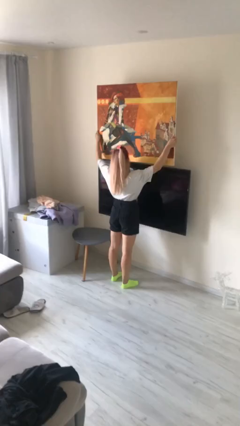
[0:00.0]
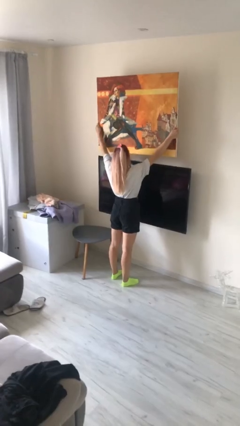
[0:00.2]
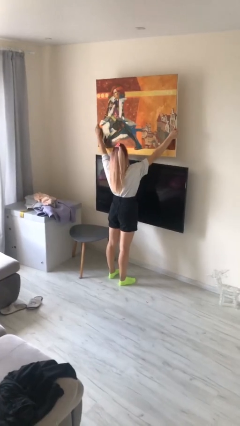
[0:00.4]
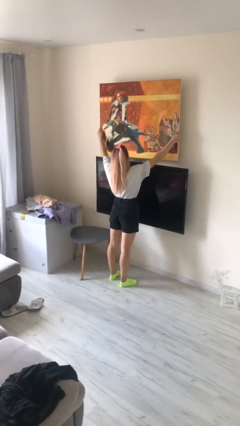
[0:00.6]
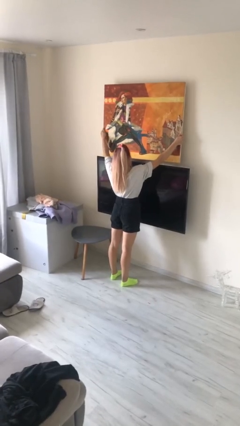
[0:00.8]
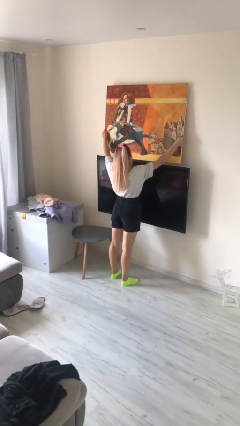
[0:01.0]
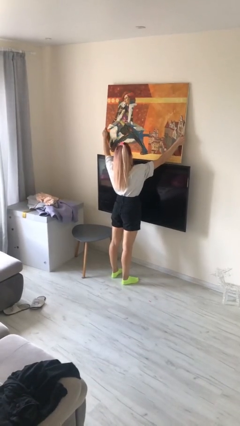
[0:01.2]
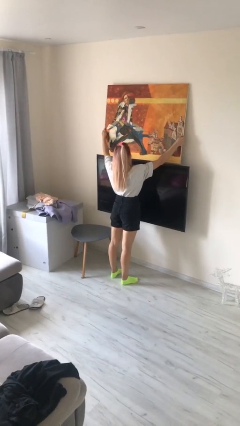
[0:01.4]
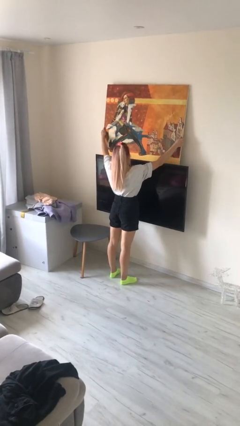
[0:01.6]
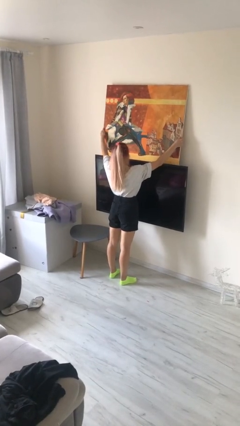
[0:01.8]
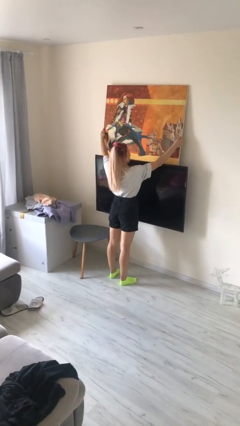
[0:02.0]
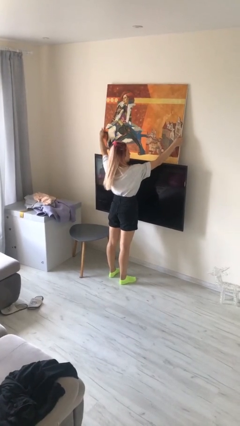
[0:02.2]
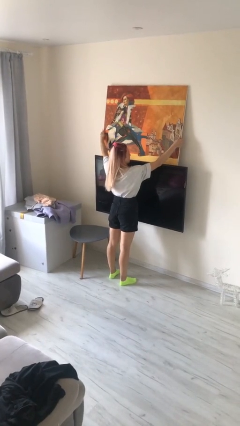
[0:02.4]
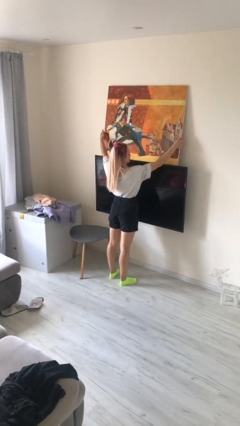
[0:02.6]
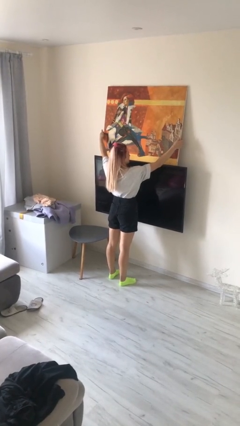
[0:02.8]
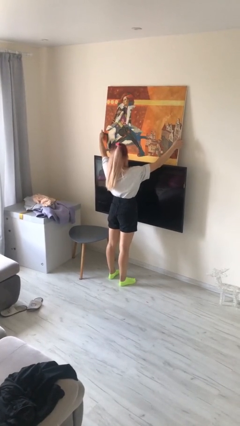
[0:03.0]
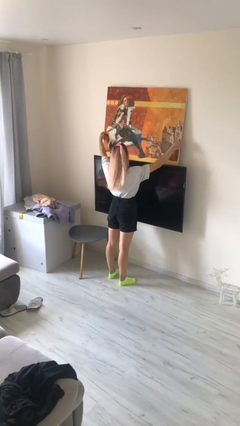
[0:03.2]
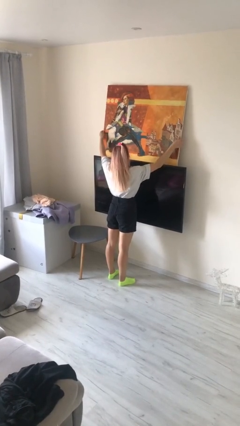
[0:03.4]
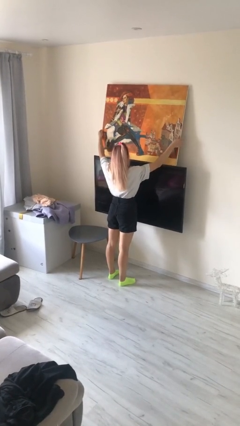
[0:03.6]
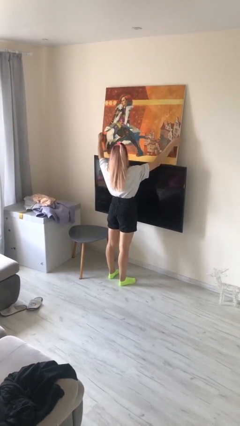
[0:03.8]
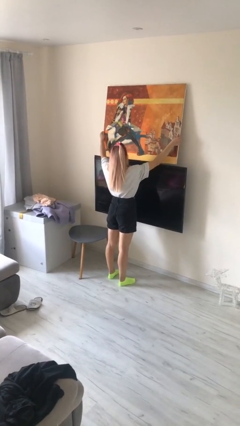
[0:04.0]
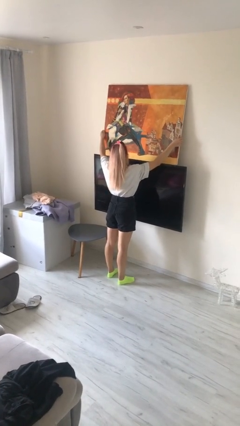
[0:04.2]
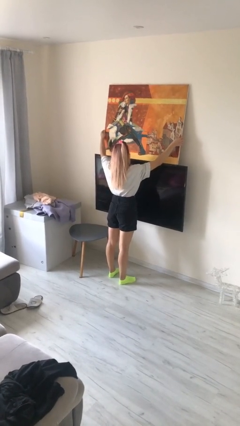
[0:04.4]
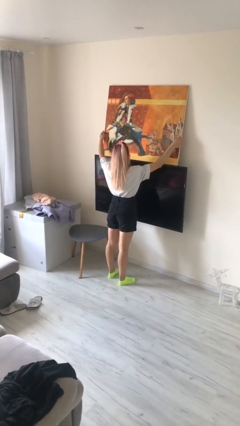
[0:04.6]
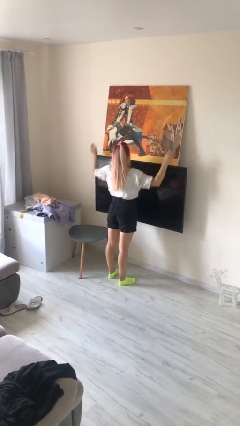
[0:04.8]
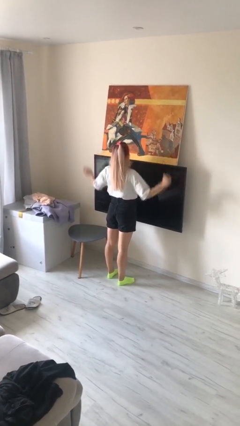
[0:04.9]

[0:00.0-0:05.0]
person puts up picture frame

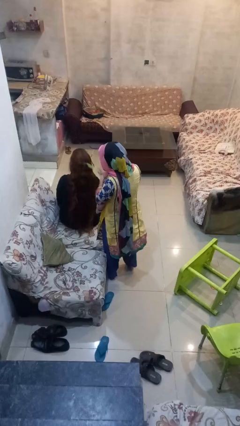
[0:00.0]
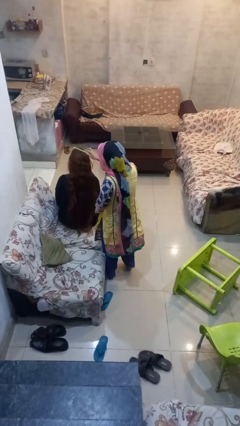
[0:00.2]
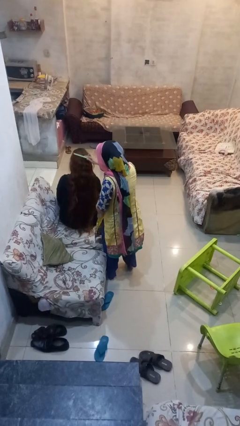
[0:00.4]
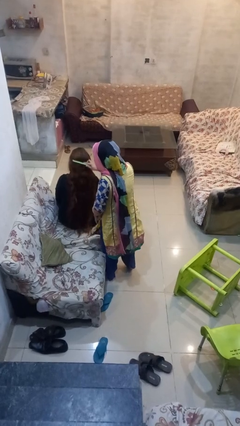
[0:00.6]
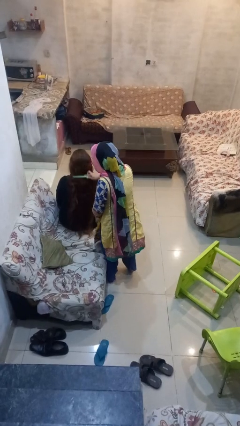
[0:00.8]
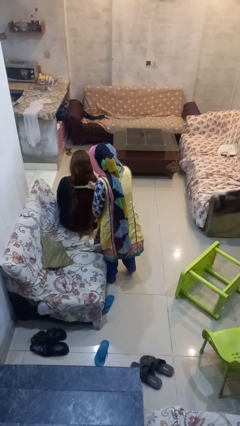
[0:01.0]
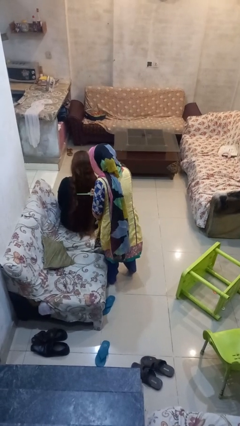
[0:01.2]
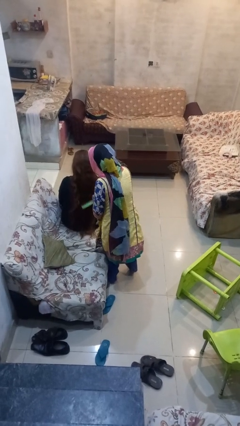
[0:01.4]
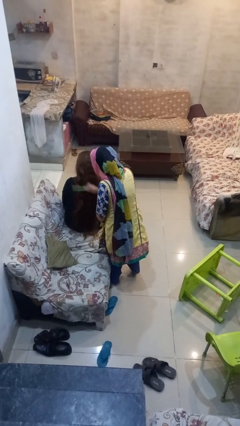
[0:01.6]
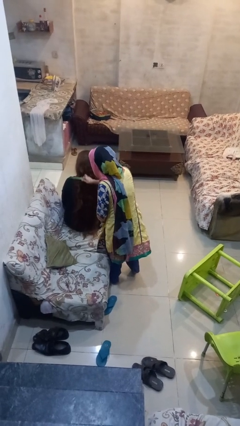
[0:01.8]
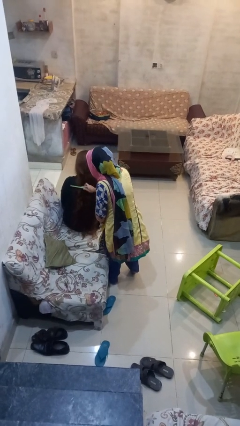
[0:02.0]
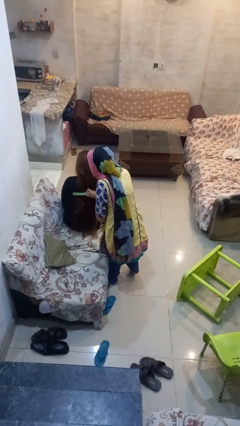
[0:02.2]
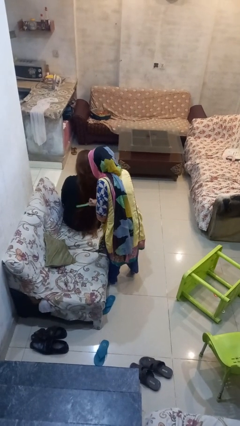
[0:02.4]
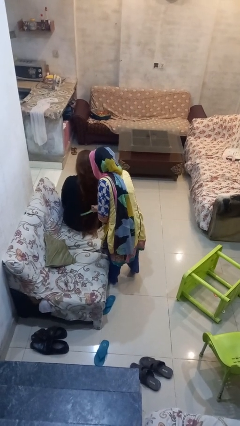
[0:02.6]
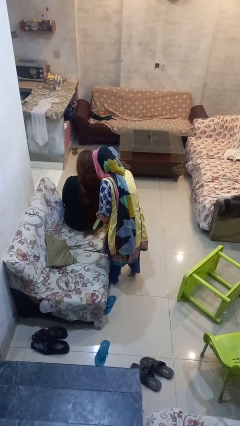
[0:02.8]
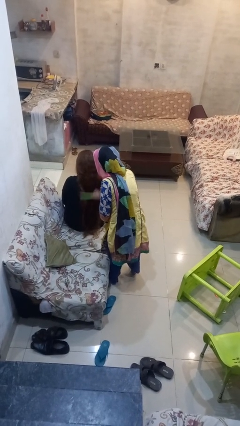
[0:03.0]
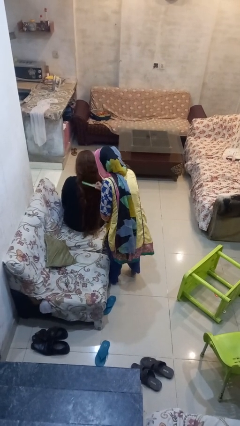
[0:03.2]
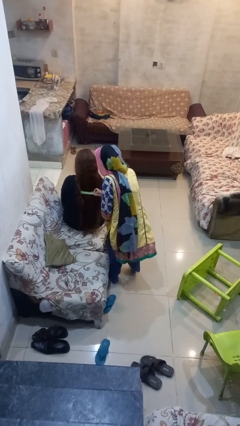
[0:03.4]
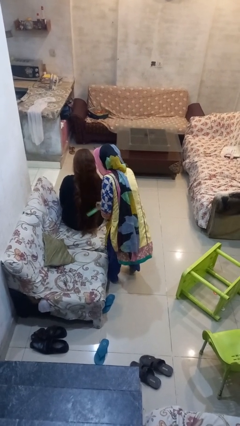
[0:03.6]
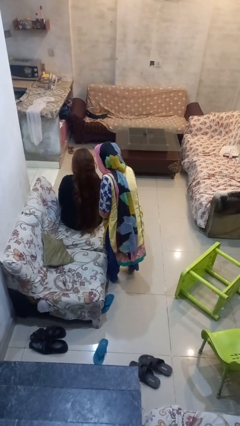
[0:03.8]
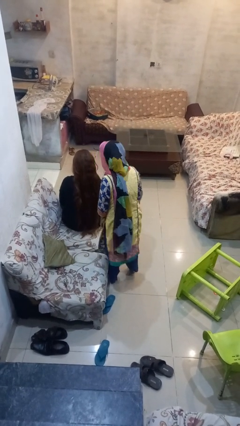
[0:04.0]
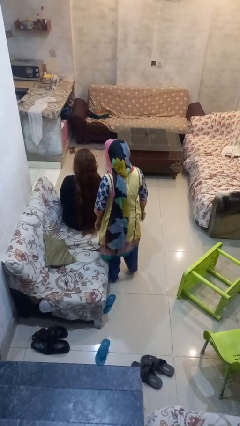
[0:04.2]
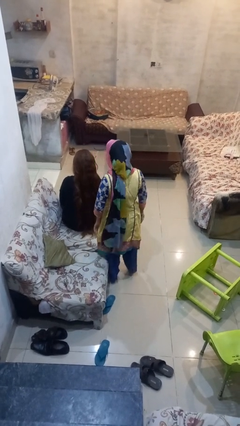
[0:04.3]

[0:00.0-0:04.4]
person brushes hair of person

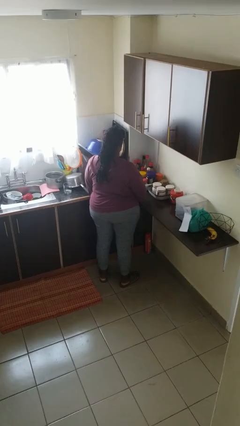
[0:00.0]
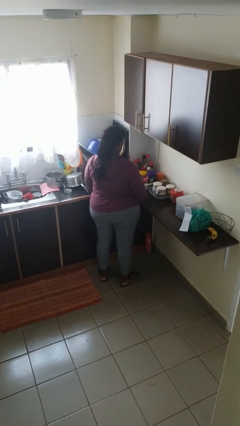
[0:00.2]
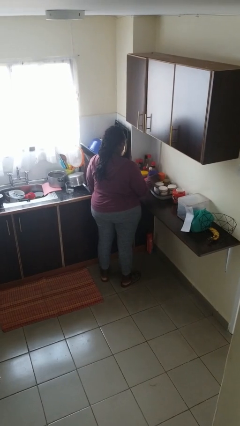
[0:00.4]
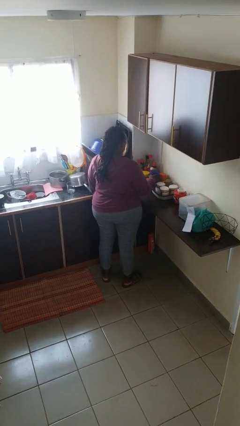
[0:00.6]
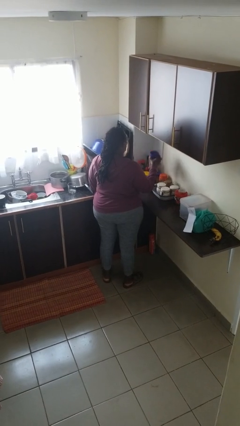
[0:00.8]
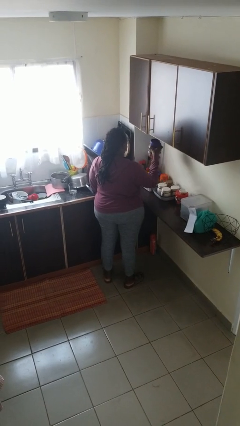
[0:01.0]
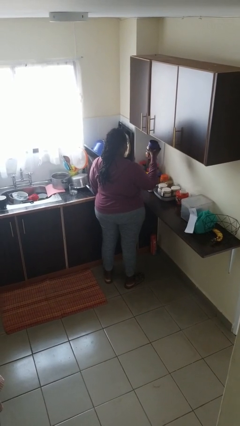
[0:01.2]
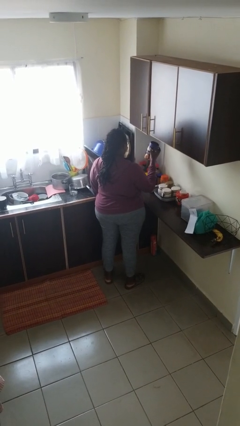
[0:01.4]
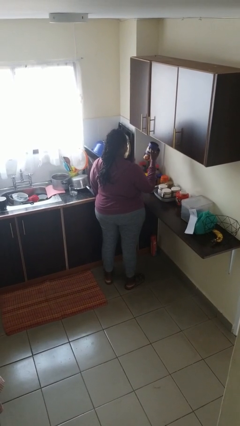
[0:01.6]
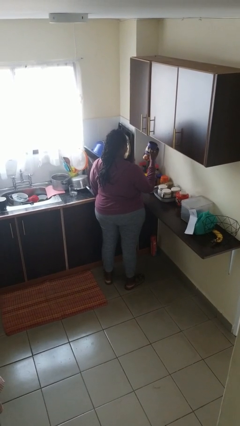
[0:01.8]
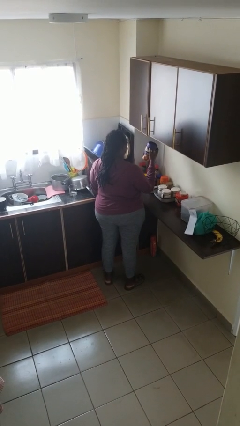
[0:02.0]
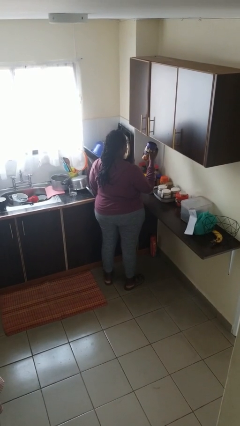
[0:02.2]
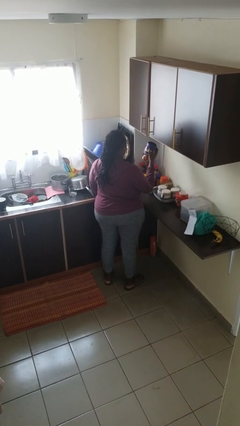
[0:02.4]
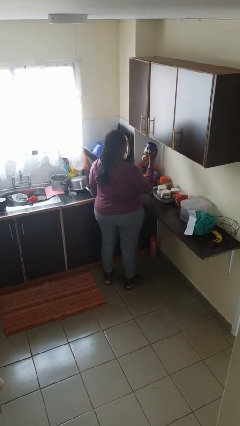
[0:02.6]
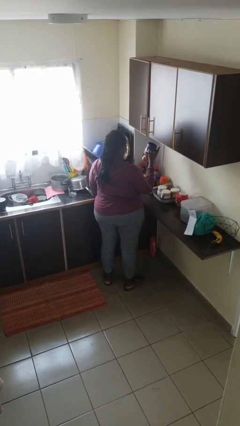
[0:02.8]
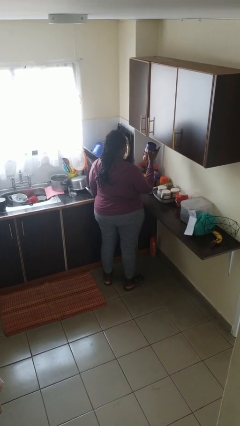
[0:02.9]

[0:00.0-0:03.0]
person picks up object from countertop

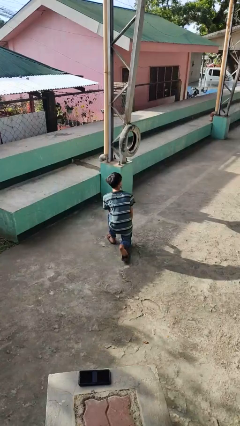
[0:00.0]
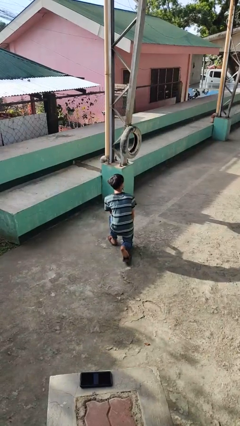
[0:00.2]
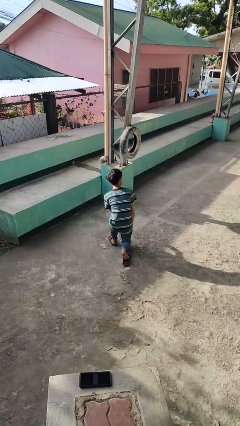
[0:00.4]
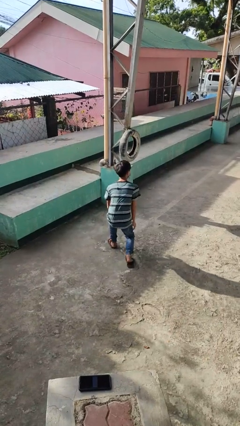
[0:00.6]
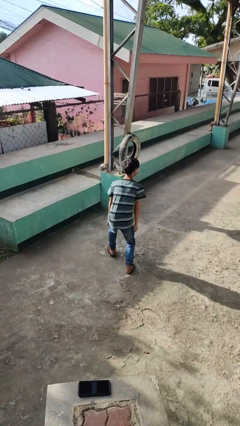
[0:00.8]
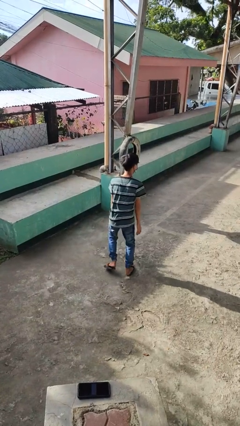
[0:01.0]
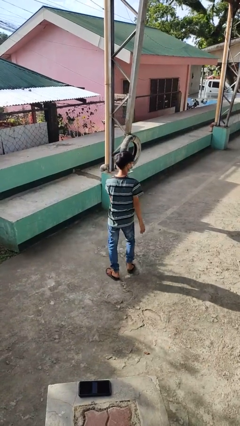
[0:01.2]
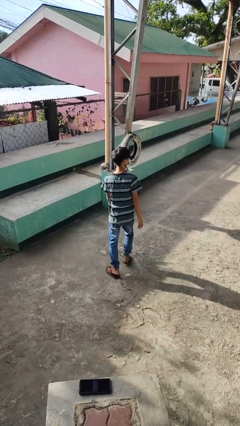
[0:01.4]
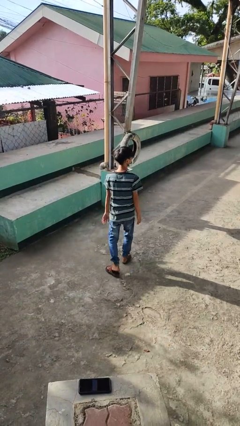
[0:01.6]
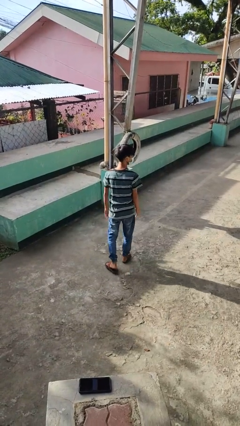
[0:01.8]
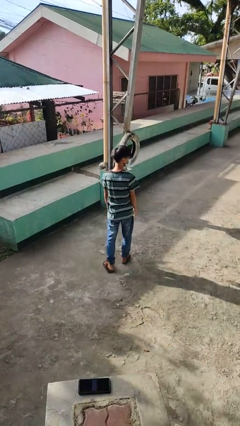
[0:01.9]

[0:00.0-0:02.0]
person stands up from floor

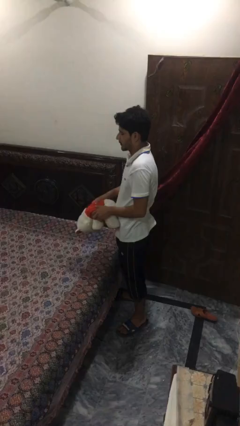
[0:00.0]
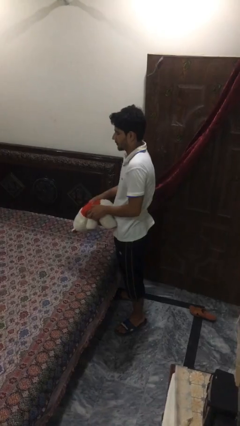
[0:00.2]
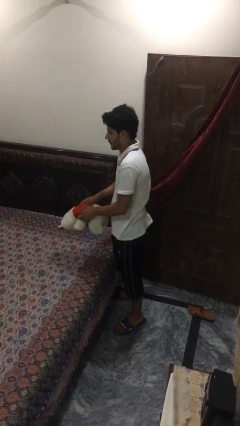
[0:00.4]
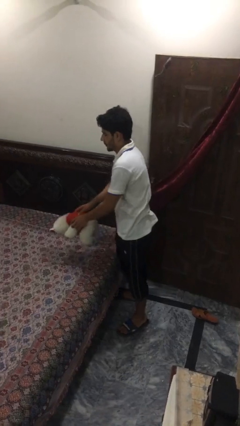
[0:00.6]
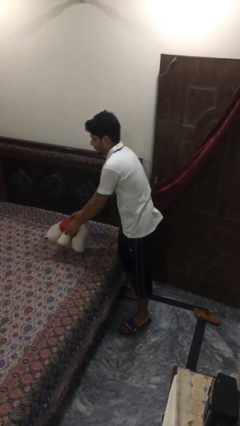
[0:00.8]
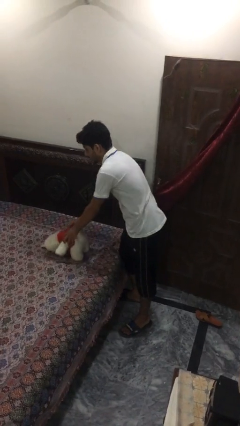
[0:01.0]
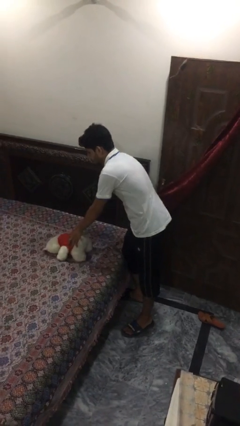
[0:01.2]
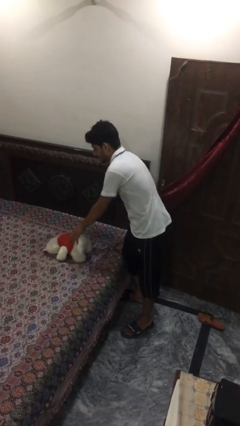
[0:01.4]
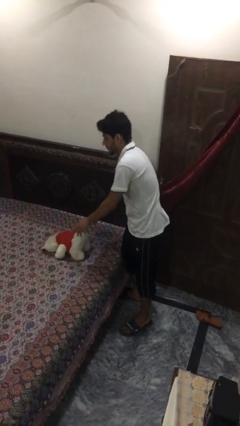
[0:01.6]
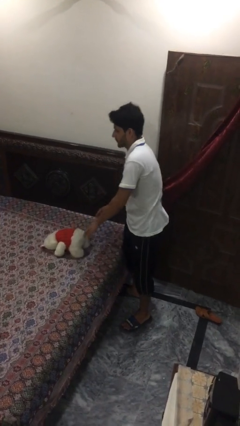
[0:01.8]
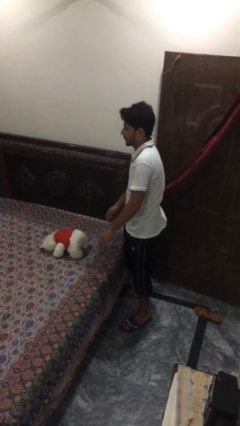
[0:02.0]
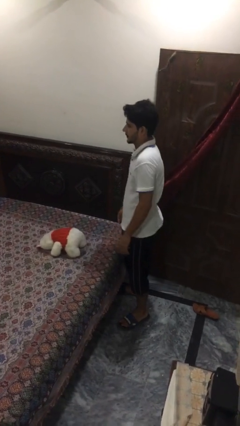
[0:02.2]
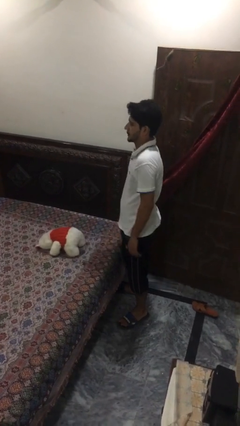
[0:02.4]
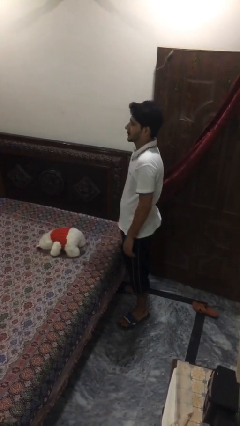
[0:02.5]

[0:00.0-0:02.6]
person puts down object on bed
